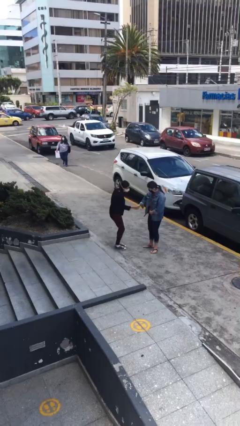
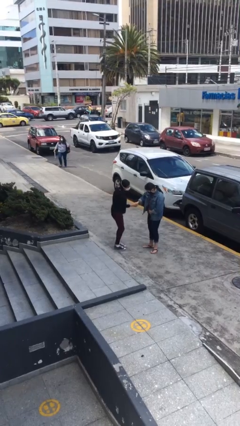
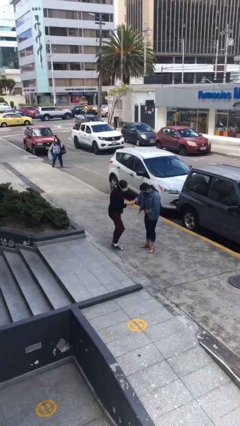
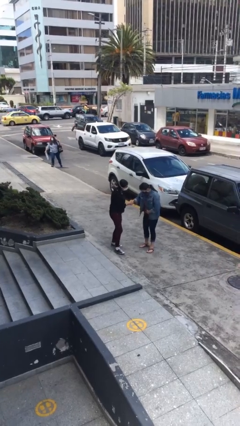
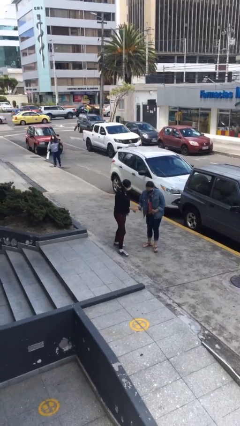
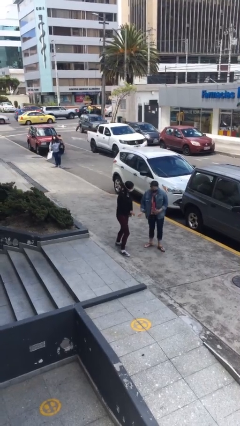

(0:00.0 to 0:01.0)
person shakes hand

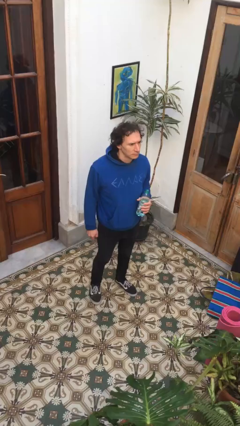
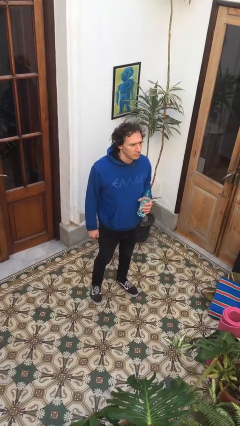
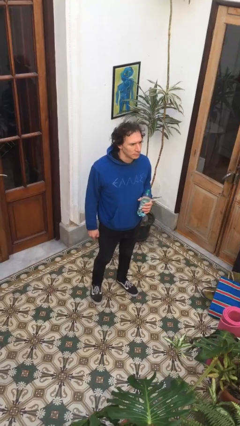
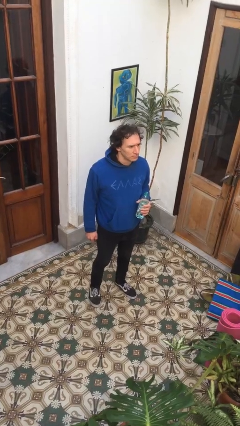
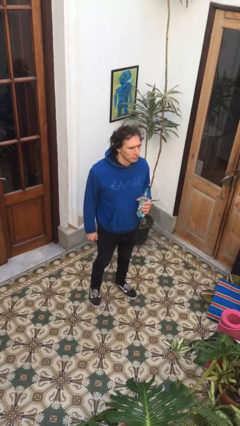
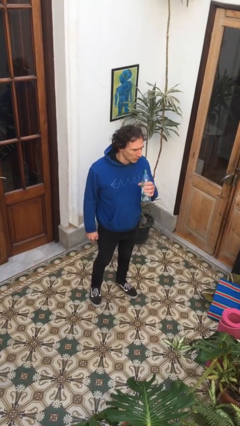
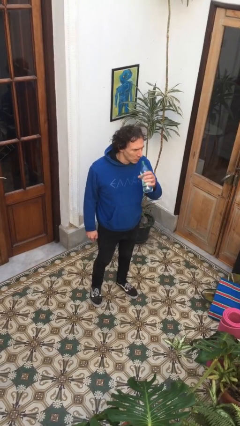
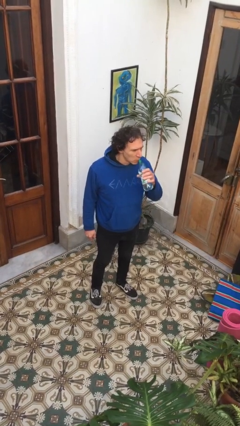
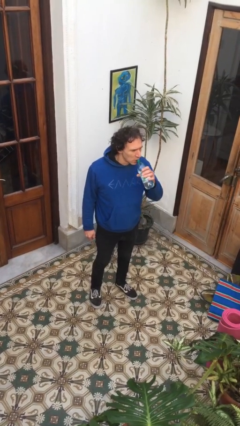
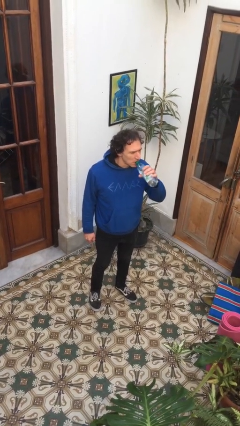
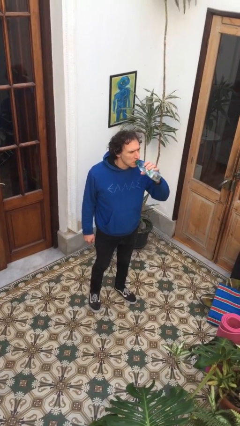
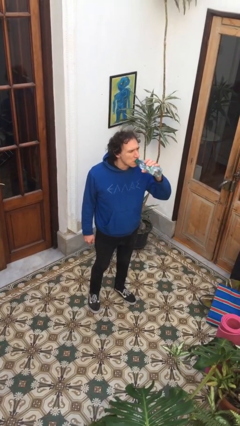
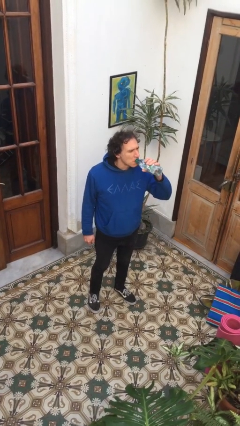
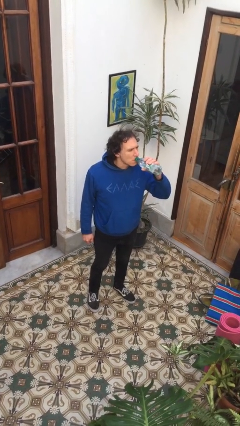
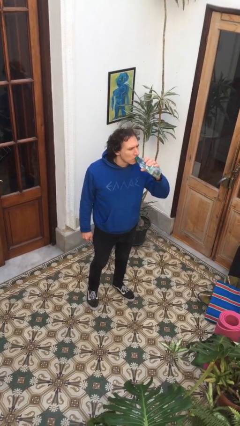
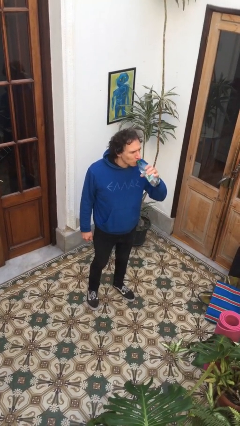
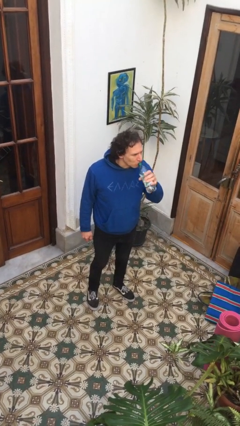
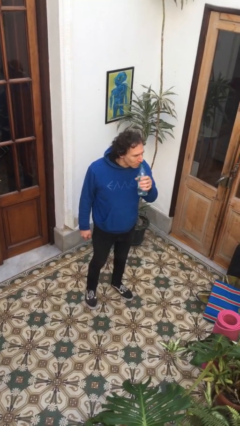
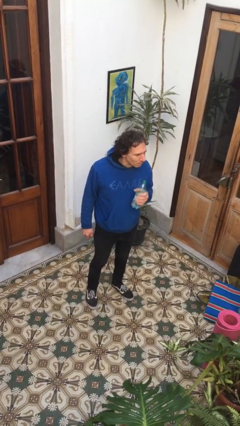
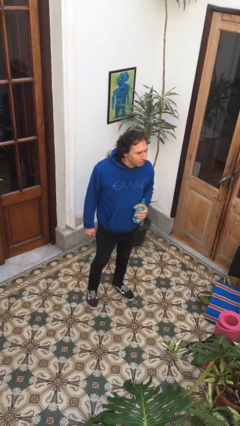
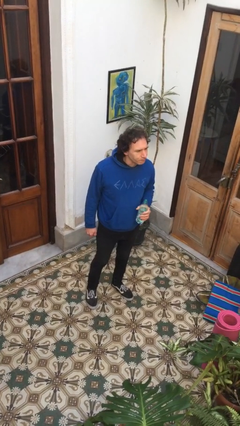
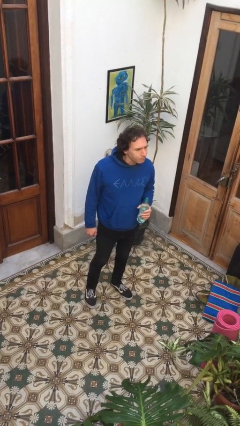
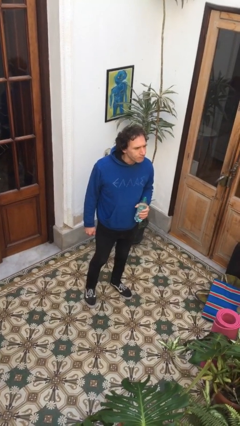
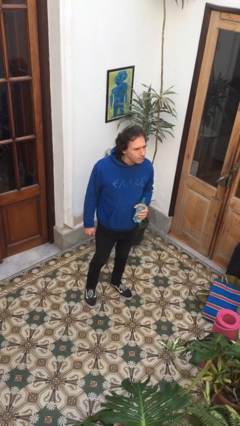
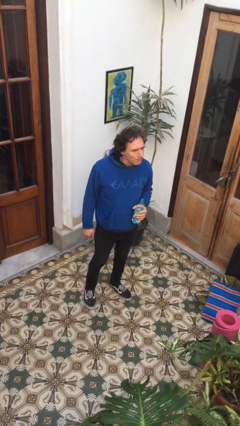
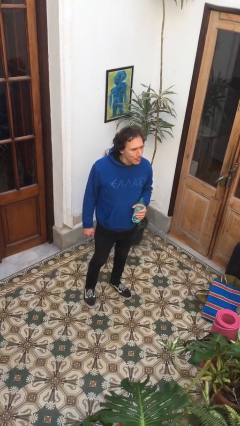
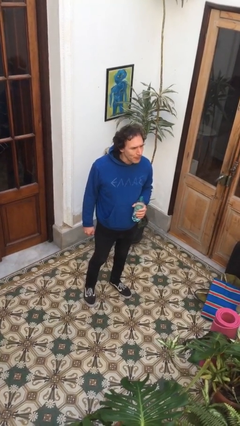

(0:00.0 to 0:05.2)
person drinks from bottle

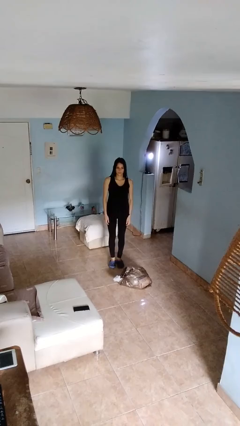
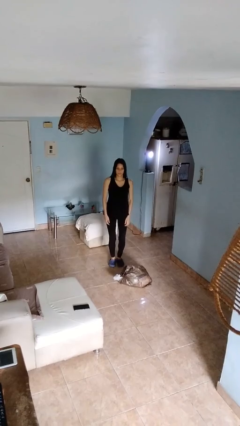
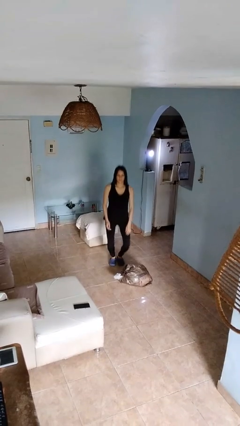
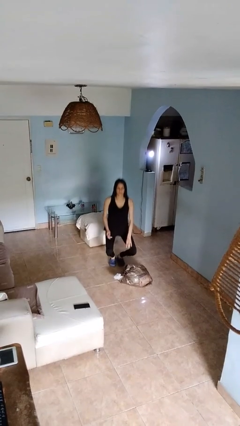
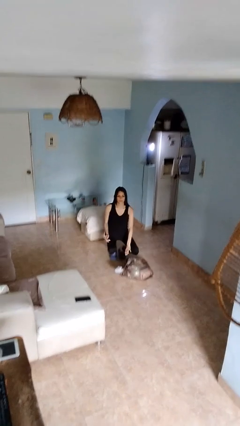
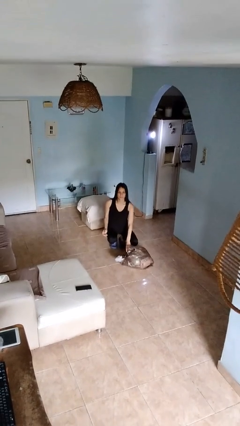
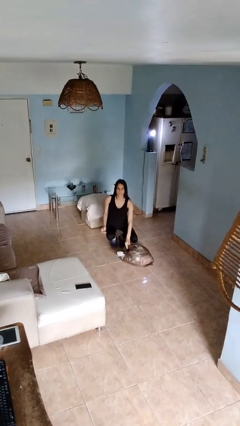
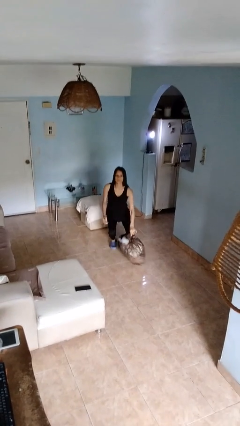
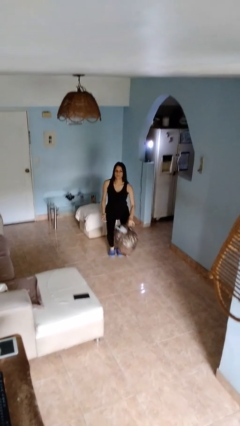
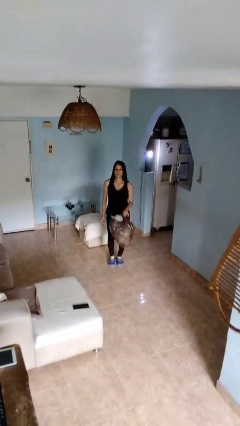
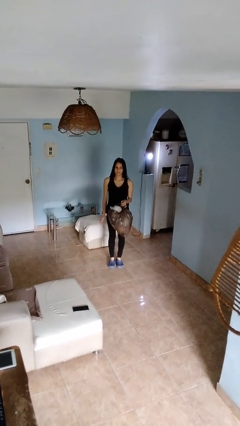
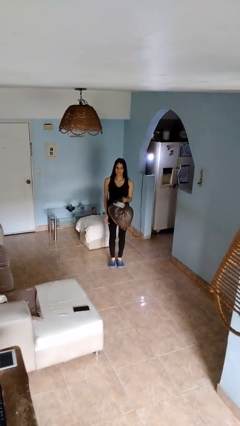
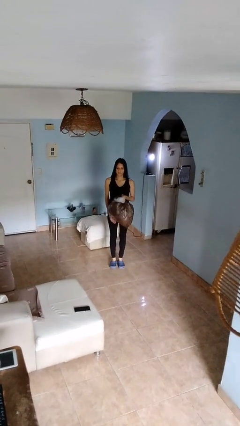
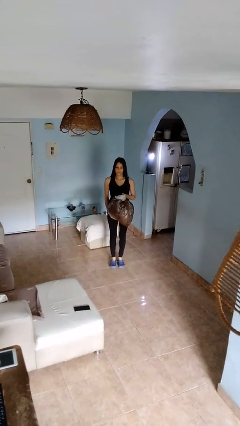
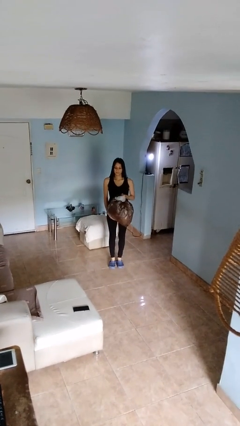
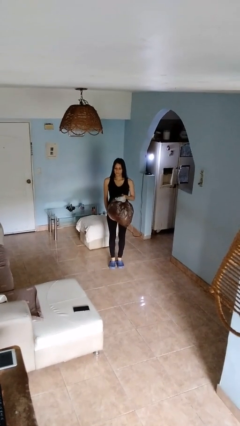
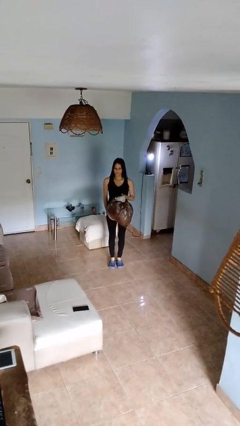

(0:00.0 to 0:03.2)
person picks up object from floor

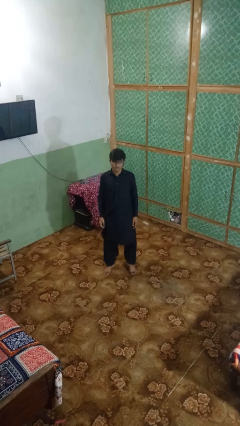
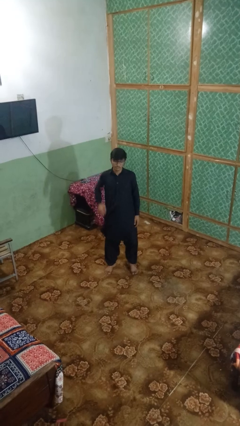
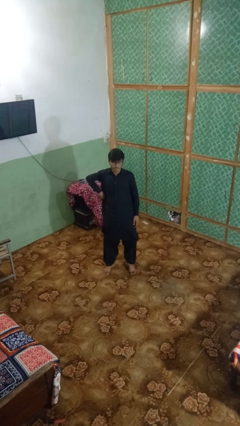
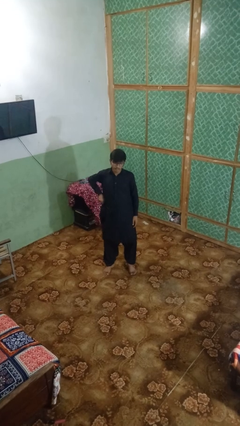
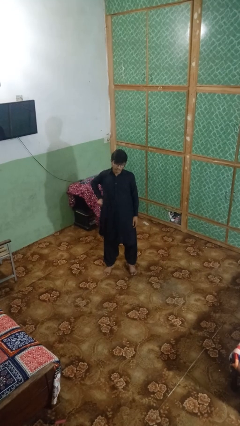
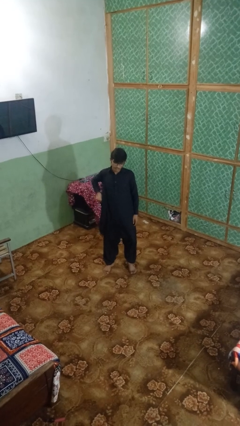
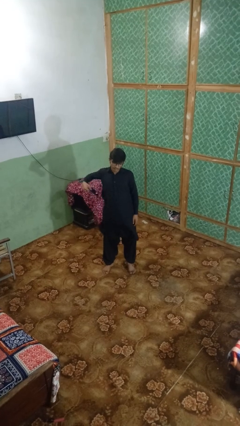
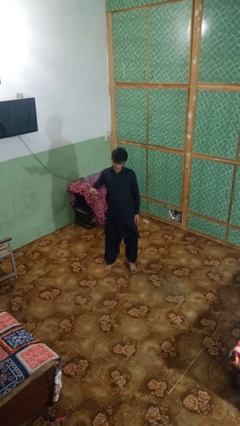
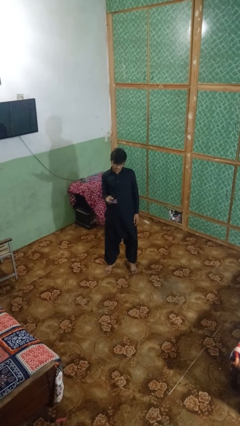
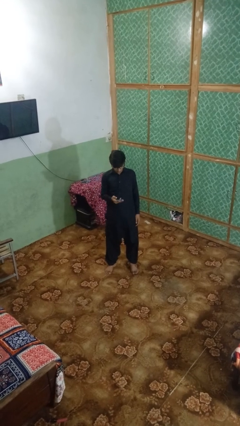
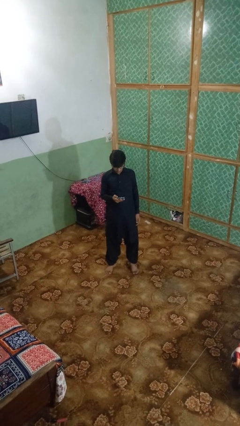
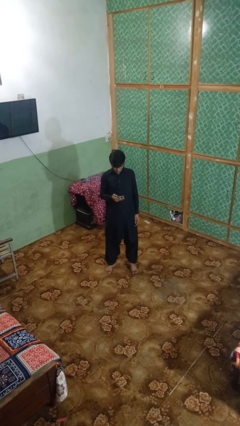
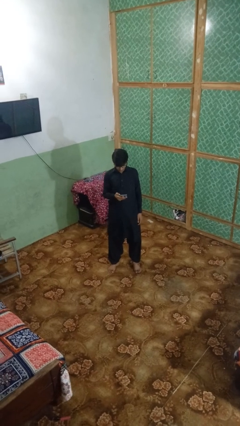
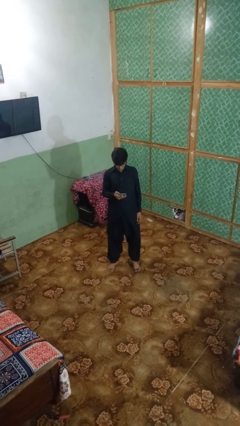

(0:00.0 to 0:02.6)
person takes phone from pocket

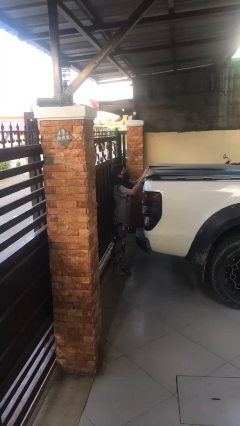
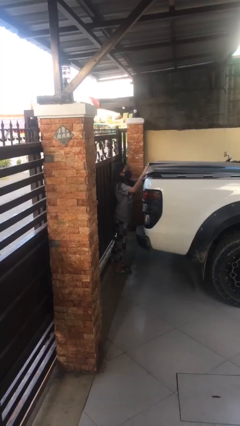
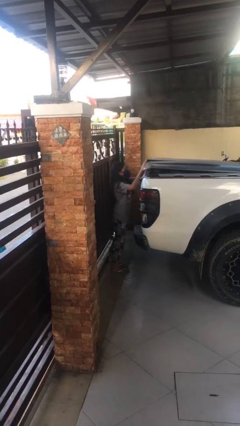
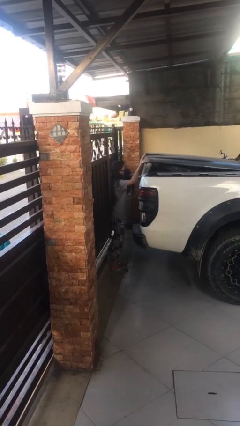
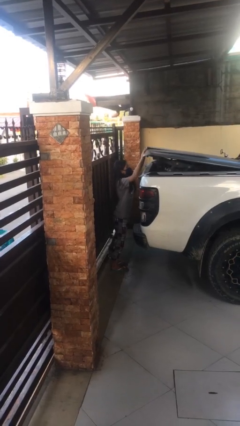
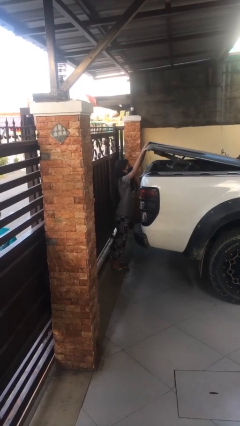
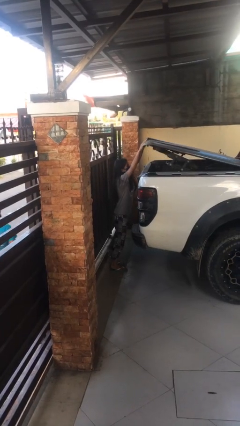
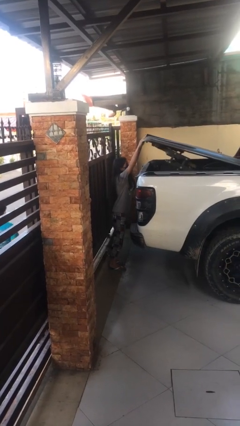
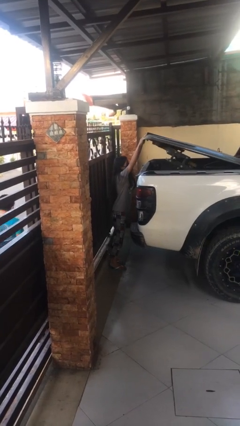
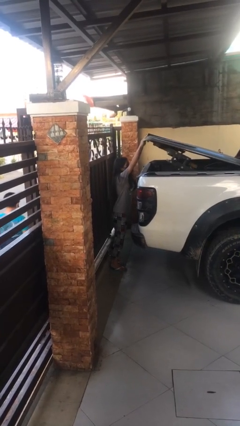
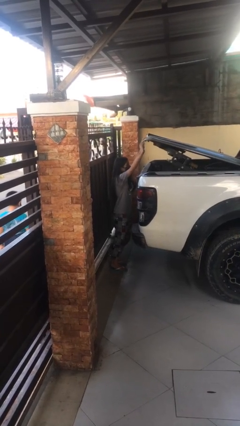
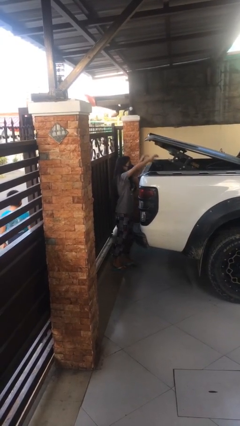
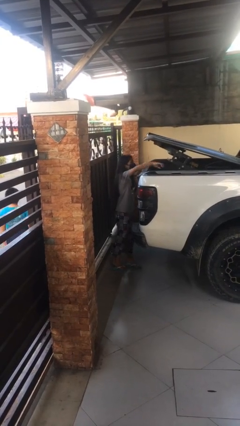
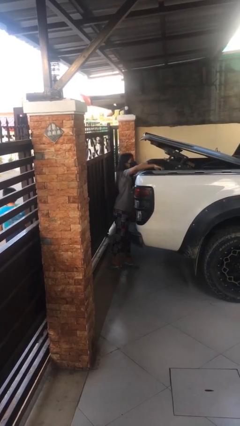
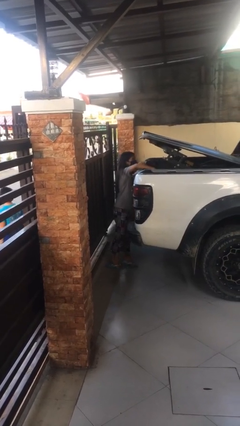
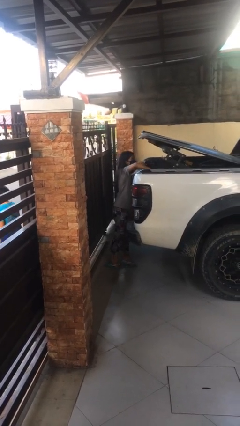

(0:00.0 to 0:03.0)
person opens car trunk

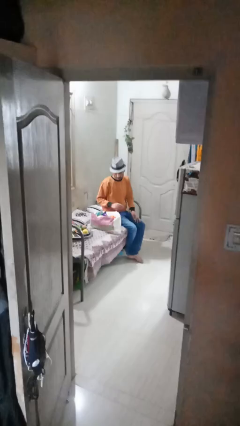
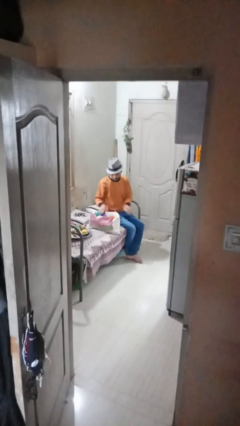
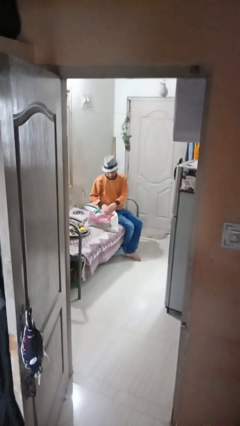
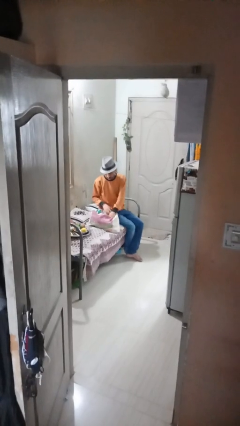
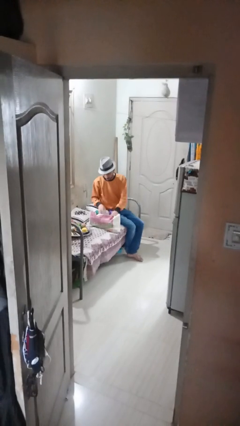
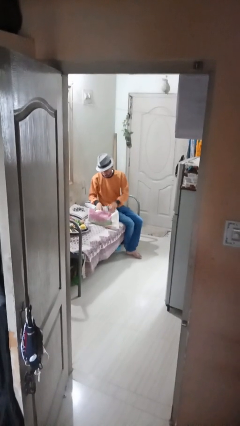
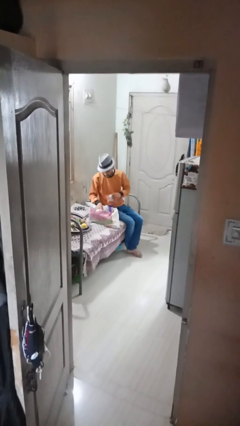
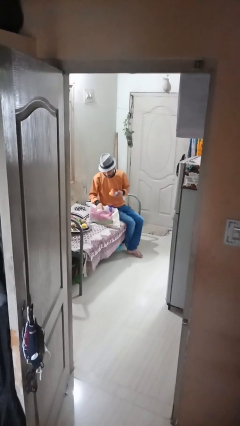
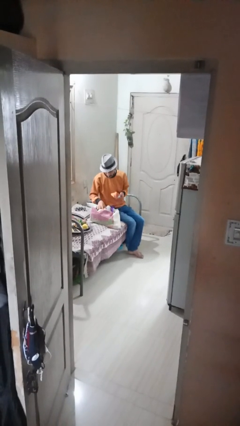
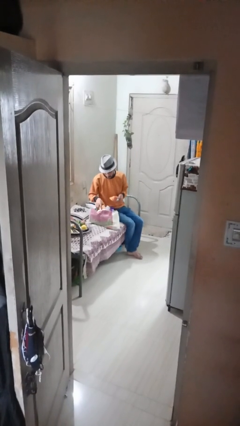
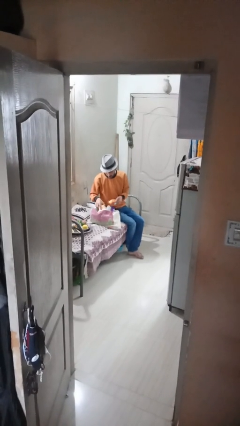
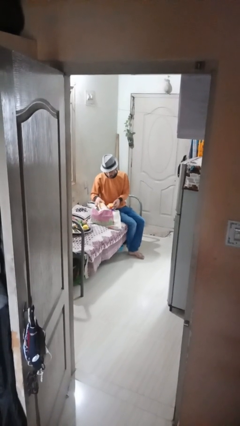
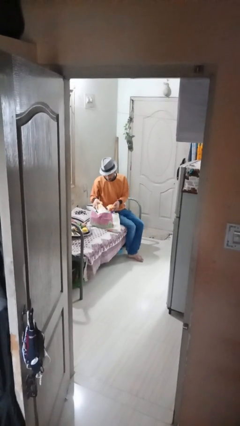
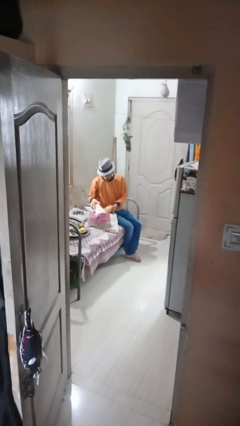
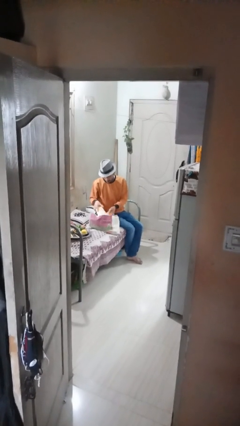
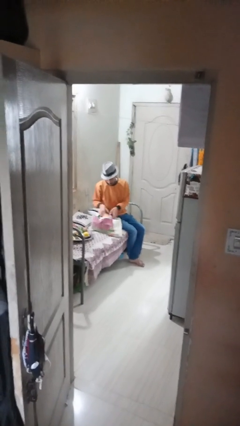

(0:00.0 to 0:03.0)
person searches in bag
